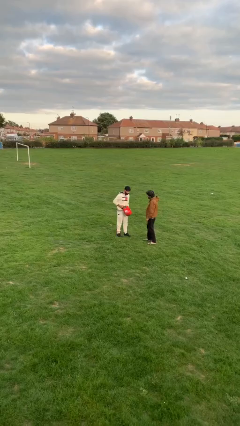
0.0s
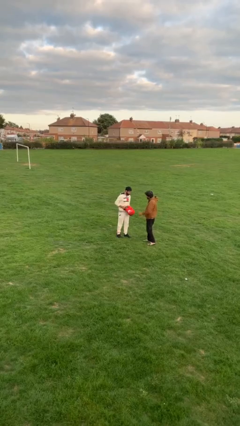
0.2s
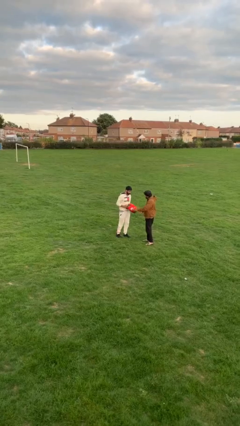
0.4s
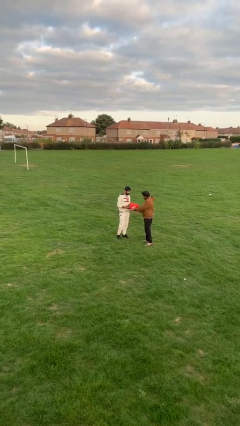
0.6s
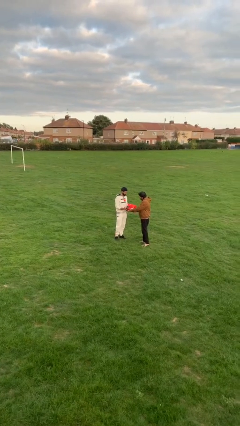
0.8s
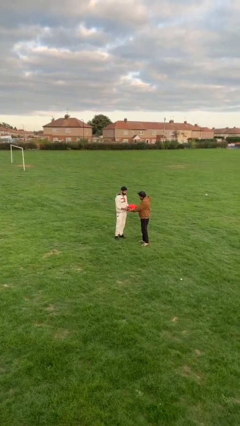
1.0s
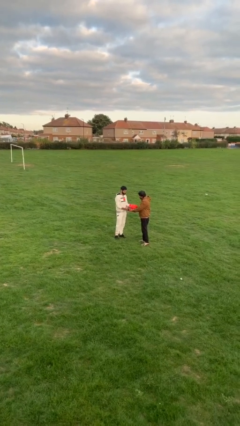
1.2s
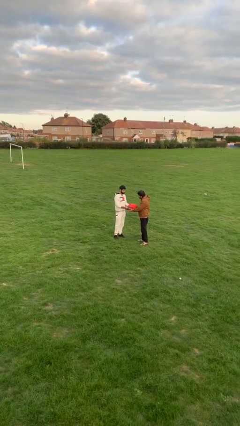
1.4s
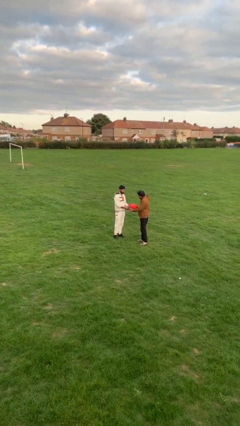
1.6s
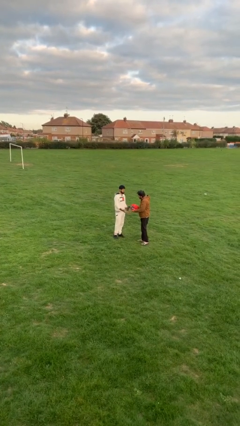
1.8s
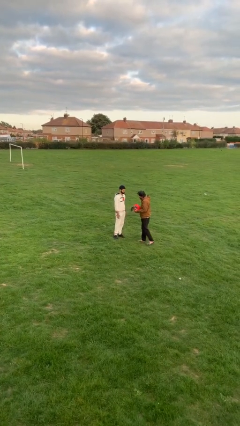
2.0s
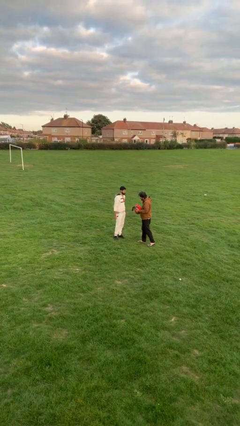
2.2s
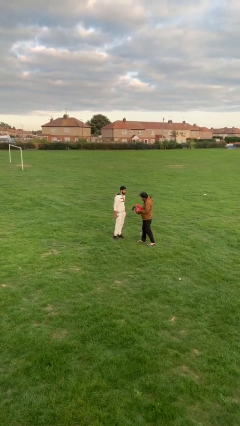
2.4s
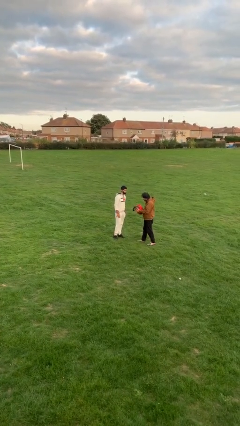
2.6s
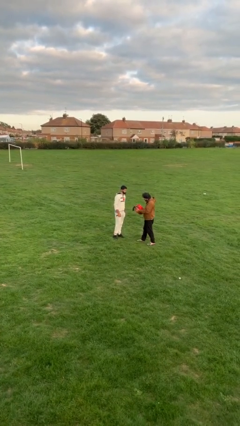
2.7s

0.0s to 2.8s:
person transfers object to person

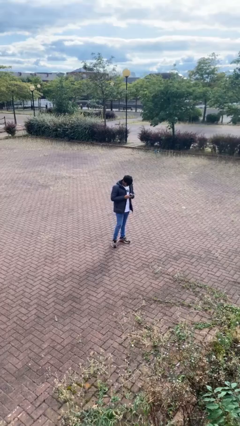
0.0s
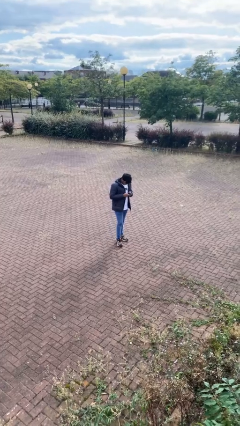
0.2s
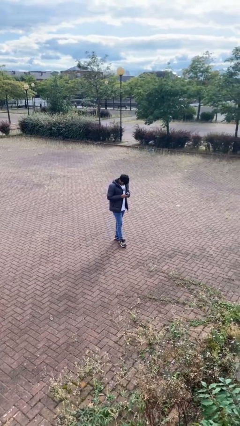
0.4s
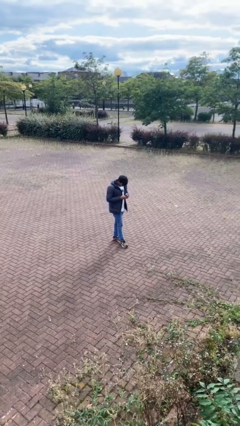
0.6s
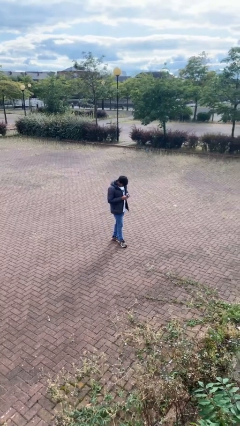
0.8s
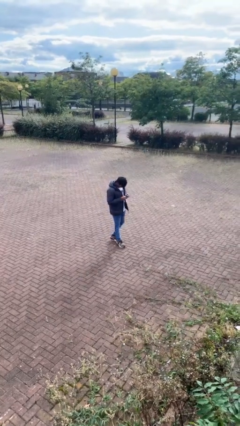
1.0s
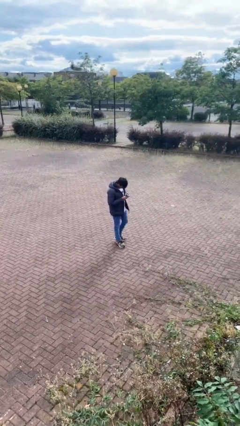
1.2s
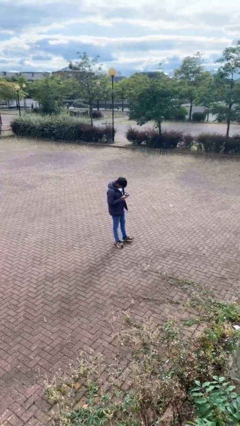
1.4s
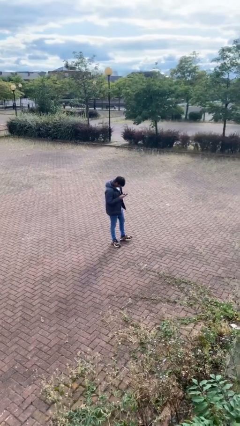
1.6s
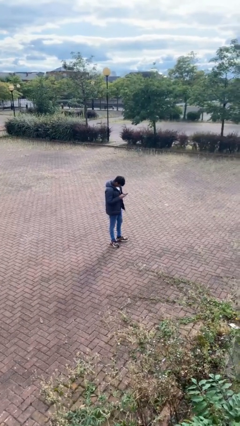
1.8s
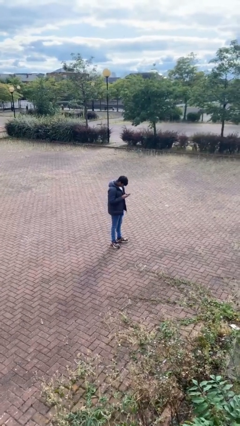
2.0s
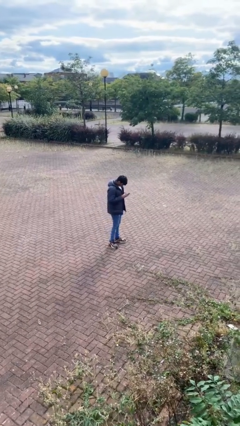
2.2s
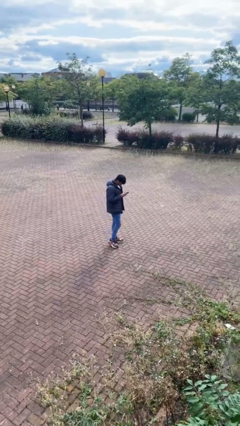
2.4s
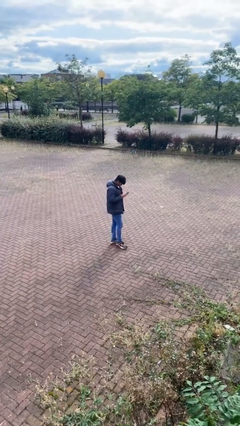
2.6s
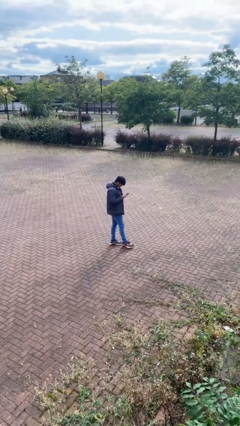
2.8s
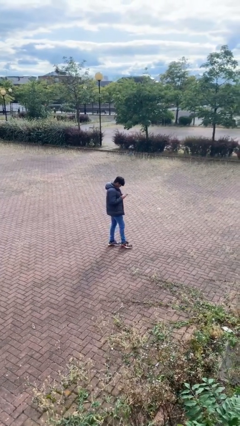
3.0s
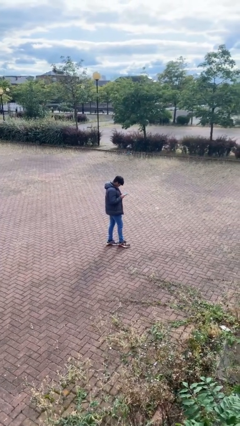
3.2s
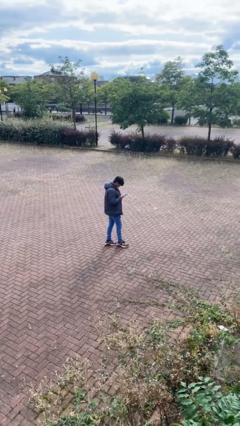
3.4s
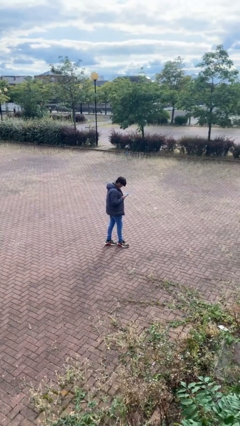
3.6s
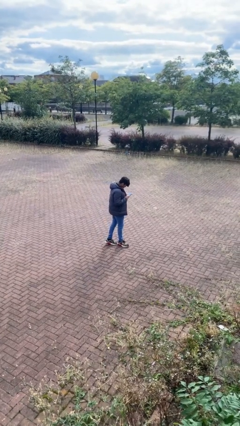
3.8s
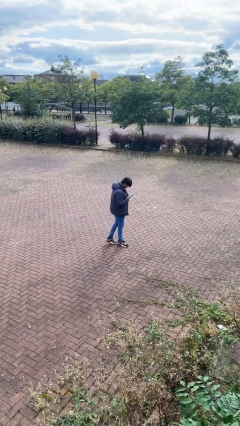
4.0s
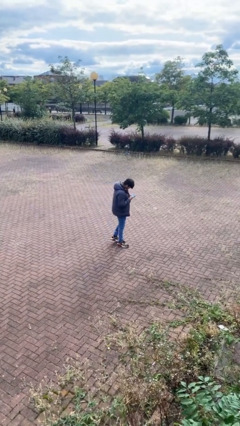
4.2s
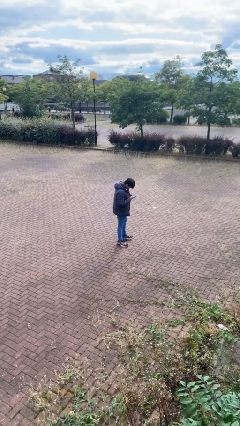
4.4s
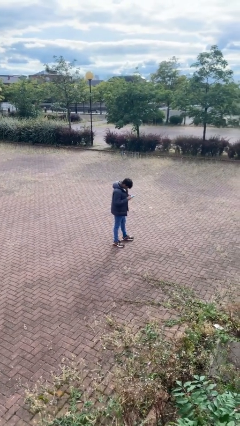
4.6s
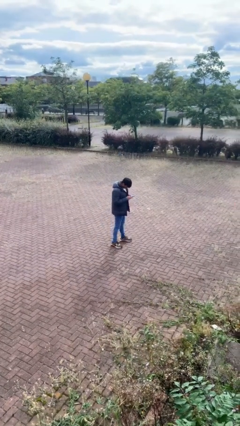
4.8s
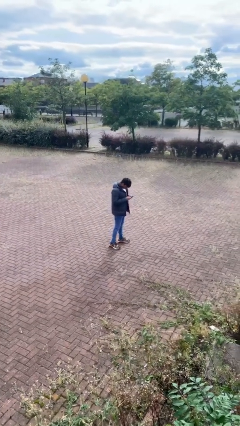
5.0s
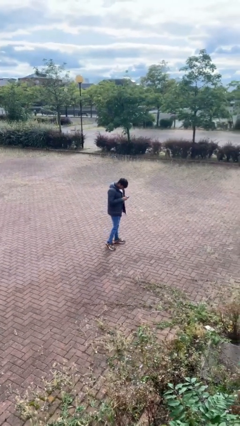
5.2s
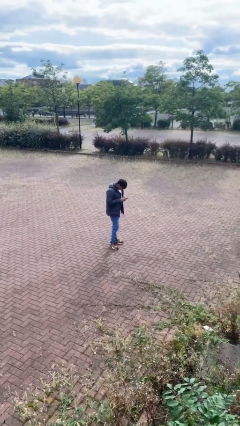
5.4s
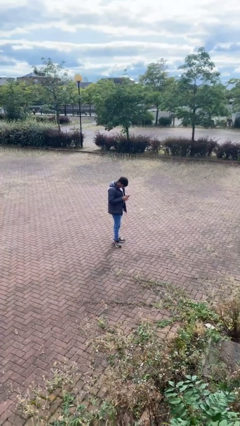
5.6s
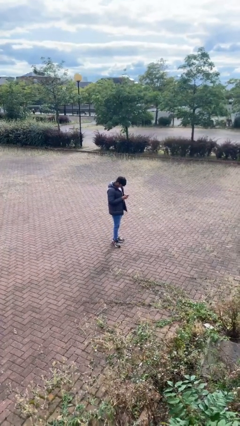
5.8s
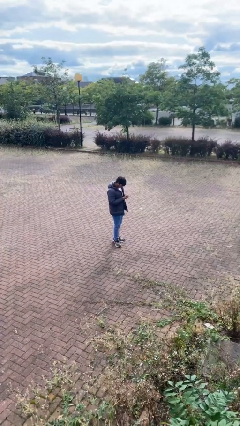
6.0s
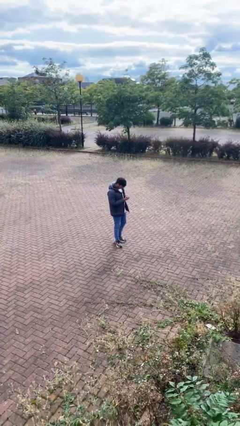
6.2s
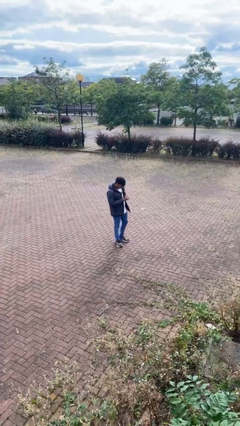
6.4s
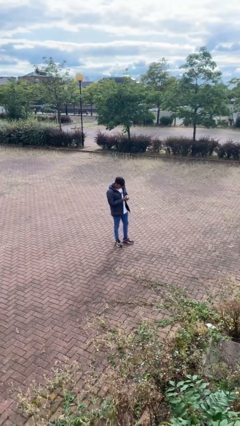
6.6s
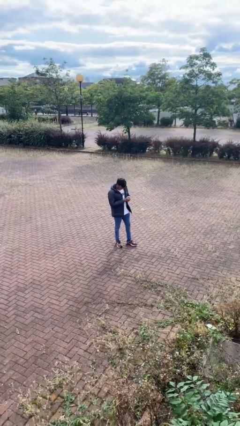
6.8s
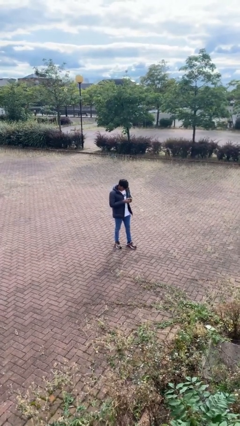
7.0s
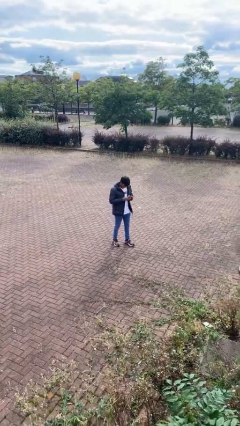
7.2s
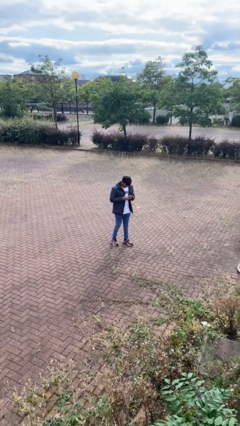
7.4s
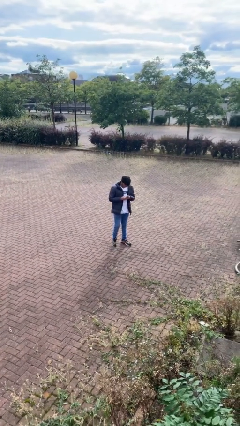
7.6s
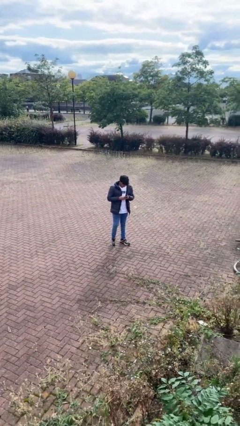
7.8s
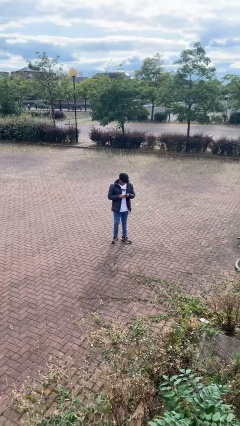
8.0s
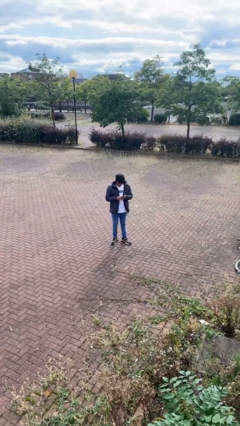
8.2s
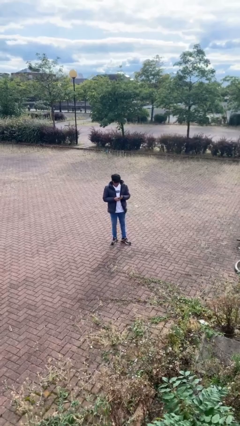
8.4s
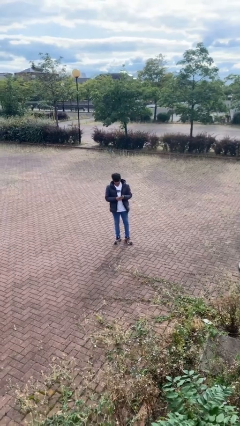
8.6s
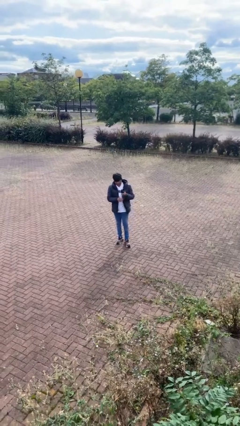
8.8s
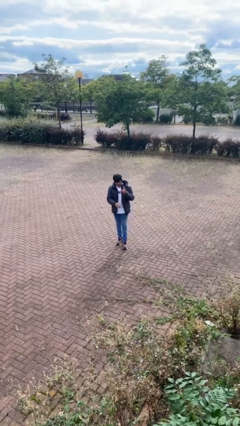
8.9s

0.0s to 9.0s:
person texts on phone

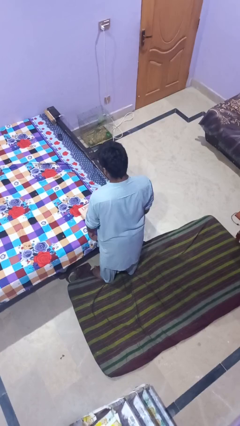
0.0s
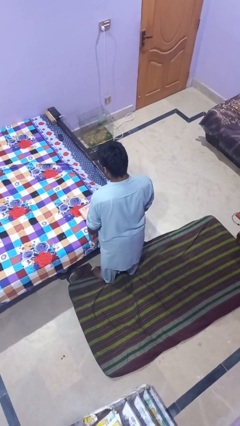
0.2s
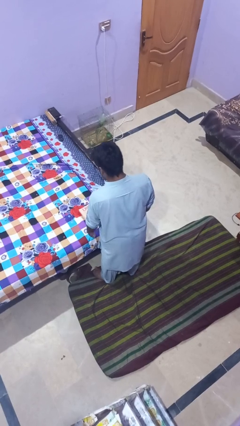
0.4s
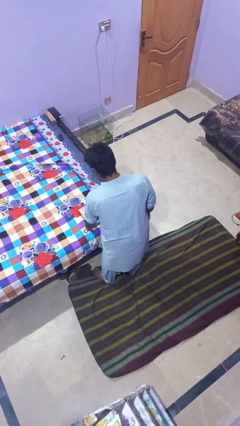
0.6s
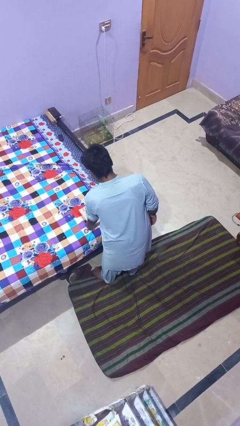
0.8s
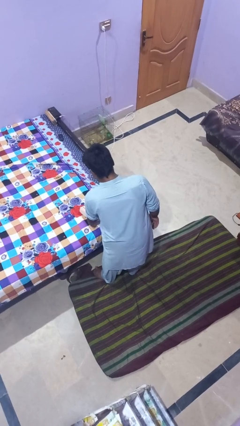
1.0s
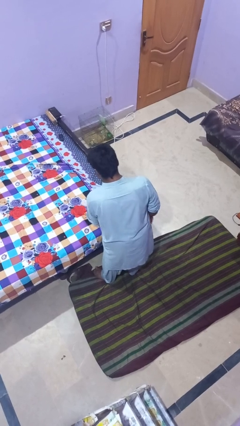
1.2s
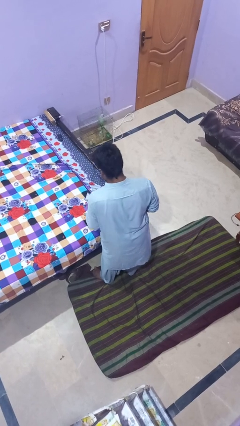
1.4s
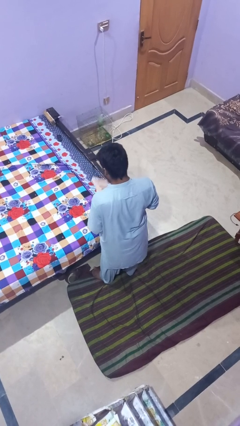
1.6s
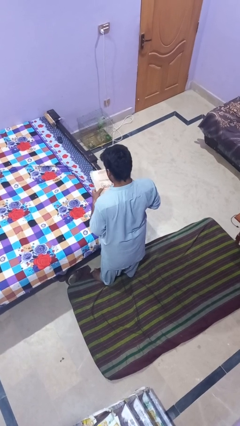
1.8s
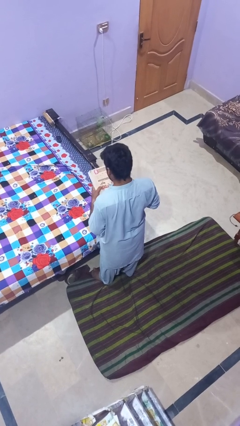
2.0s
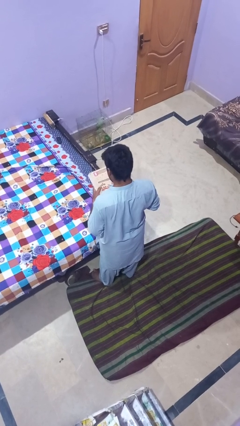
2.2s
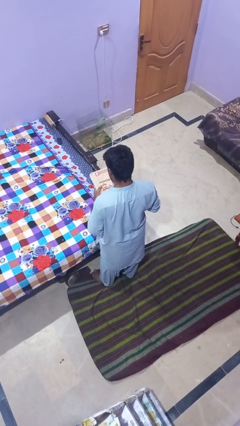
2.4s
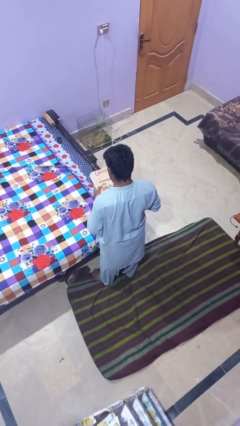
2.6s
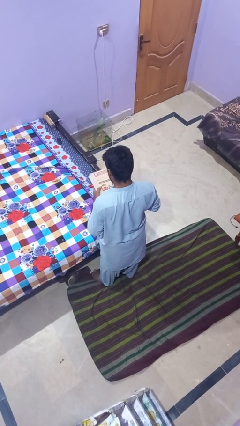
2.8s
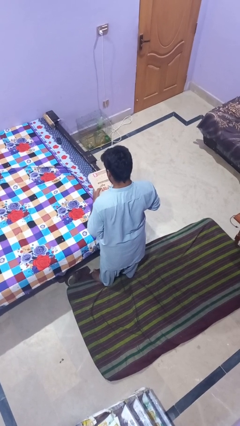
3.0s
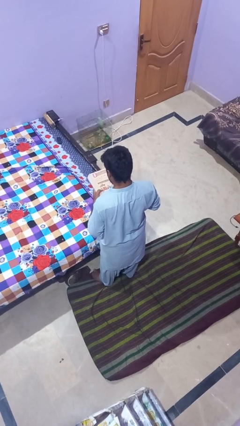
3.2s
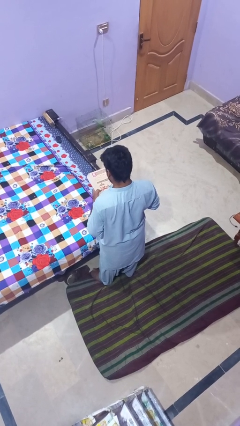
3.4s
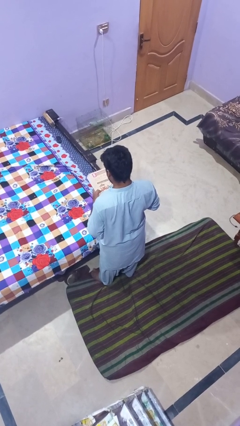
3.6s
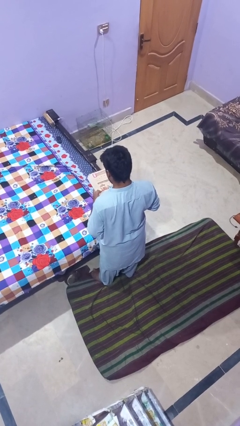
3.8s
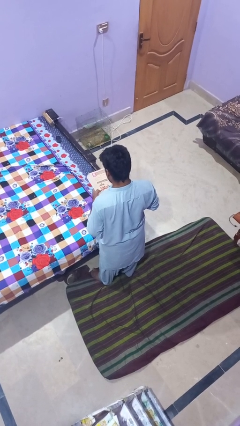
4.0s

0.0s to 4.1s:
person picks up object from bed

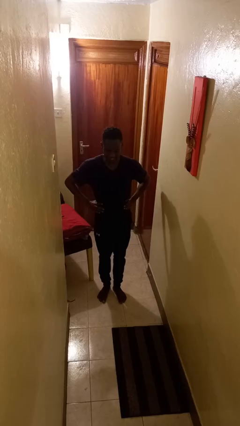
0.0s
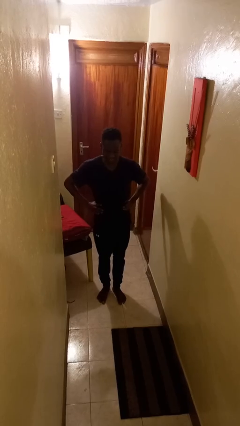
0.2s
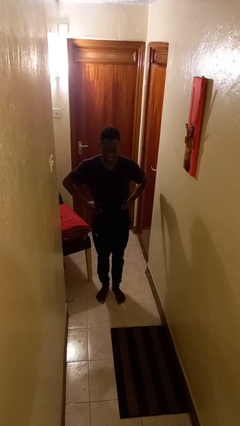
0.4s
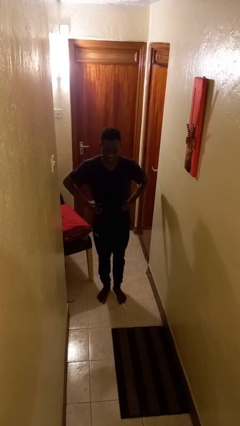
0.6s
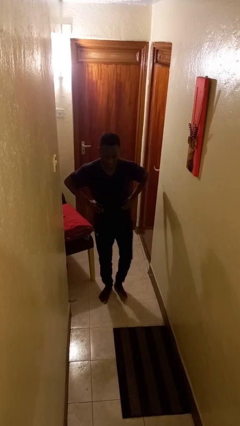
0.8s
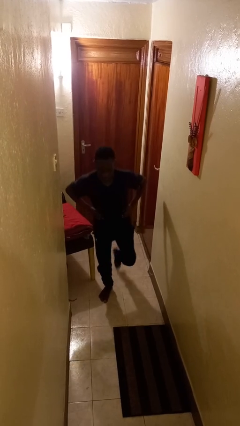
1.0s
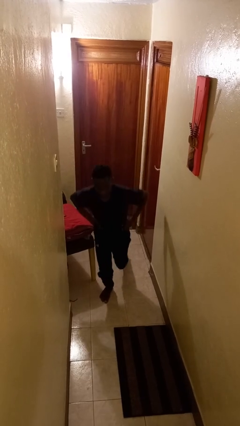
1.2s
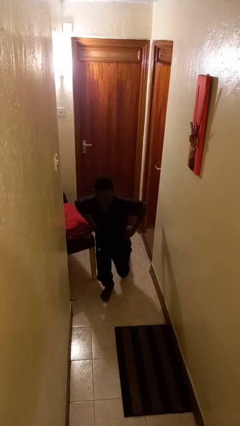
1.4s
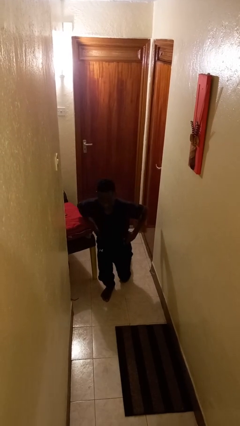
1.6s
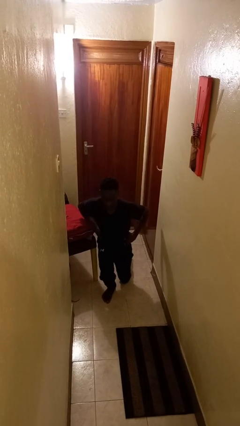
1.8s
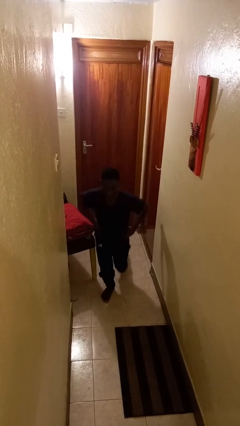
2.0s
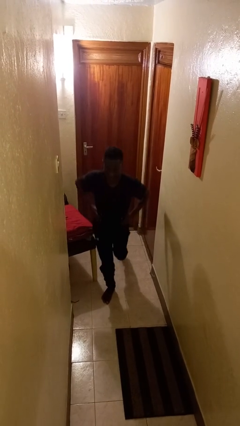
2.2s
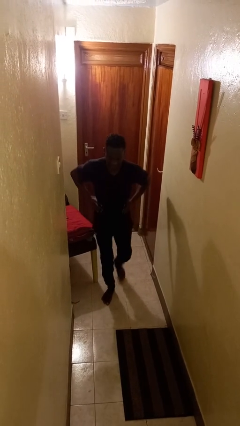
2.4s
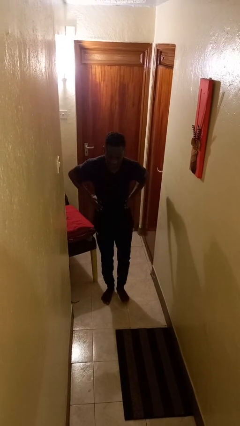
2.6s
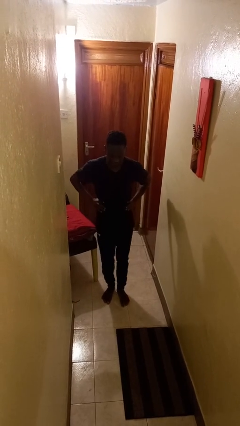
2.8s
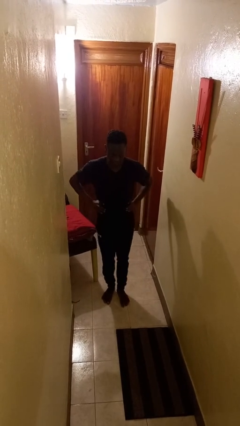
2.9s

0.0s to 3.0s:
person exercises with lunges
